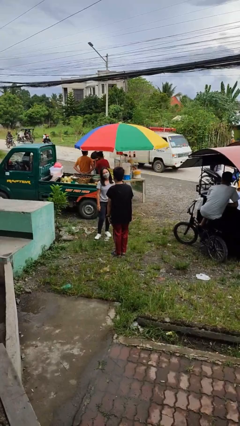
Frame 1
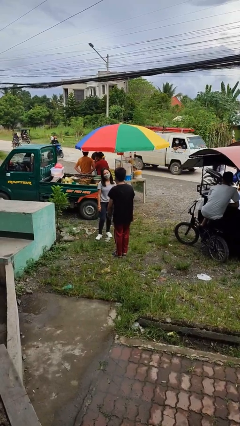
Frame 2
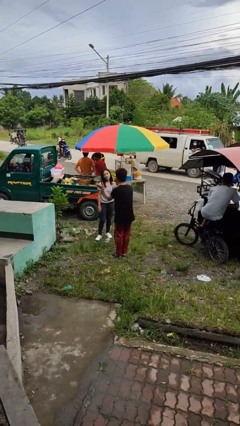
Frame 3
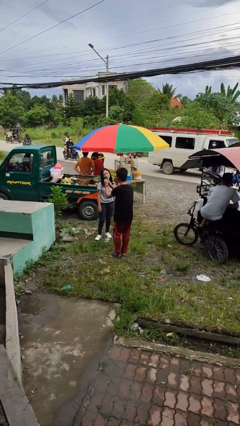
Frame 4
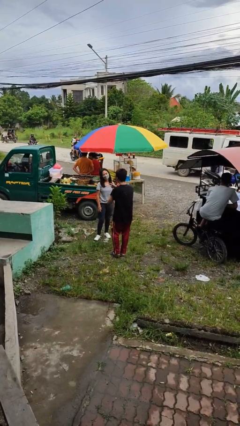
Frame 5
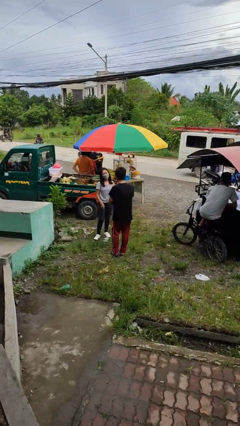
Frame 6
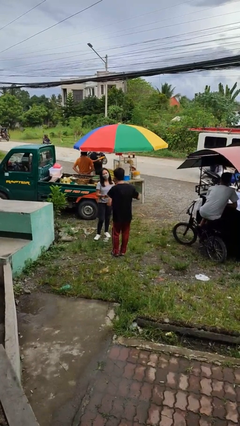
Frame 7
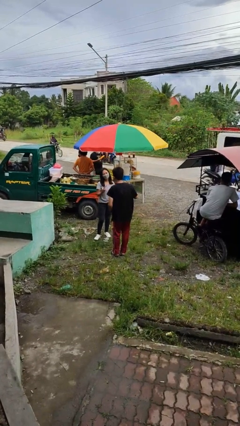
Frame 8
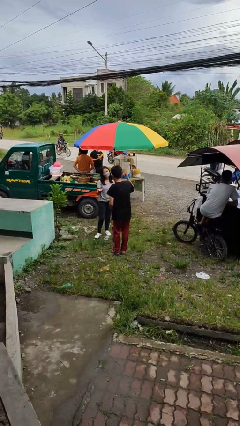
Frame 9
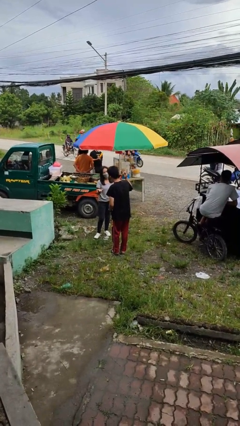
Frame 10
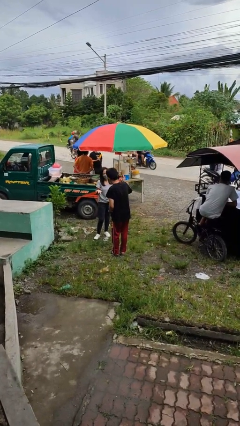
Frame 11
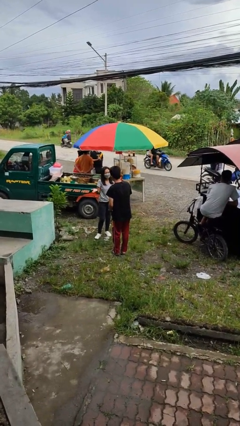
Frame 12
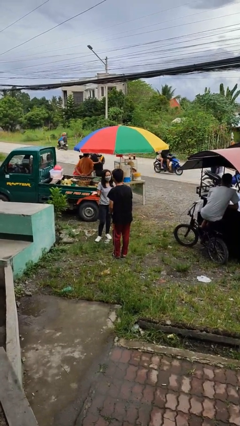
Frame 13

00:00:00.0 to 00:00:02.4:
person talks to person

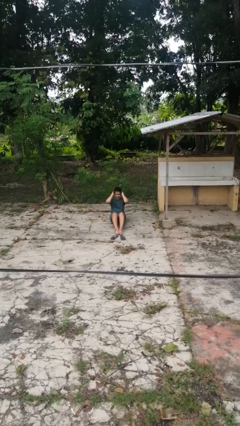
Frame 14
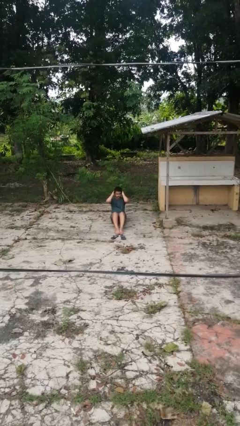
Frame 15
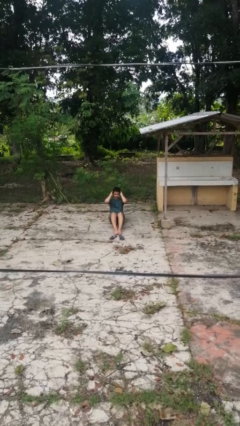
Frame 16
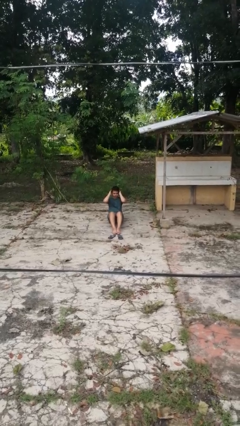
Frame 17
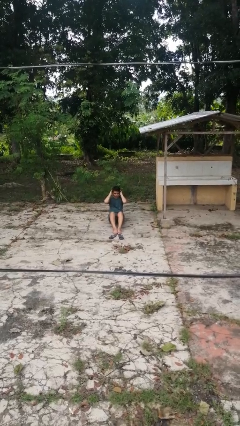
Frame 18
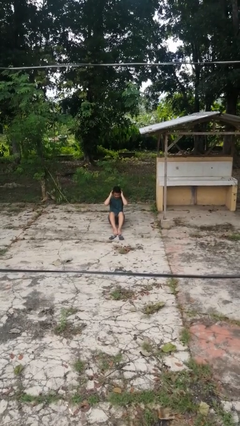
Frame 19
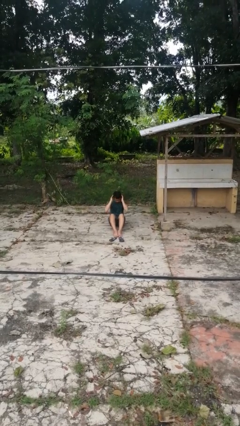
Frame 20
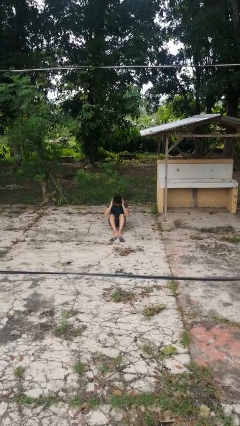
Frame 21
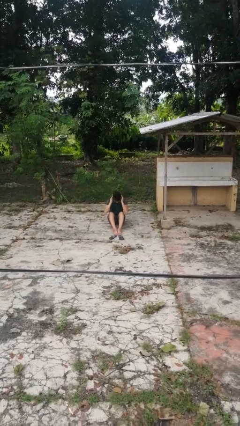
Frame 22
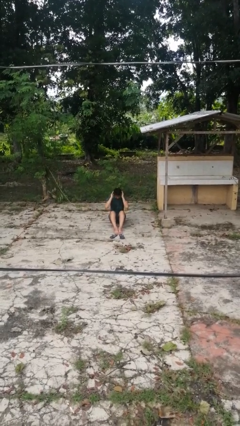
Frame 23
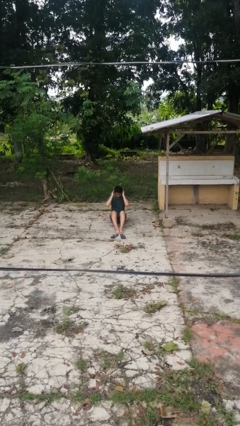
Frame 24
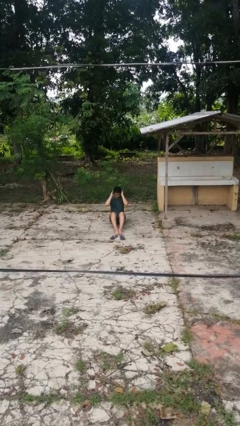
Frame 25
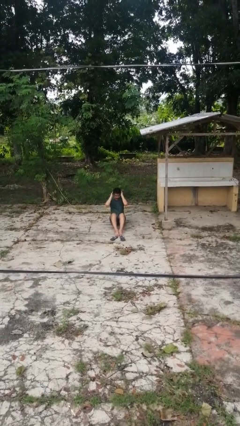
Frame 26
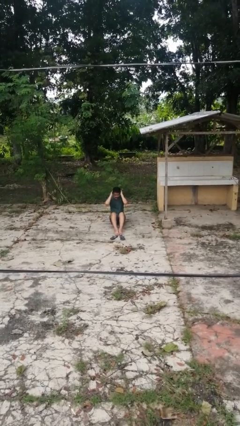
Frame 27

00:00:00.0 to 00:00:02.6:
person exercises with situp

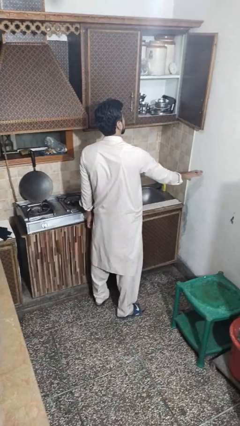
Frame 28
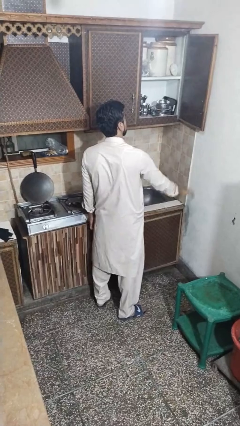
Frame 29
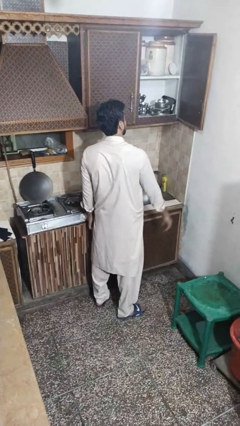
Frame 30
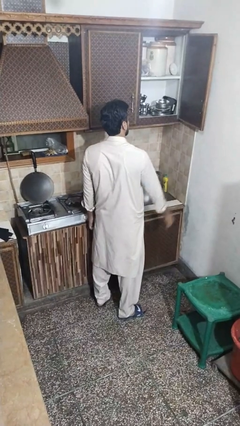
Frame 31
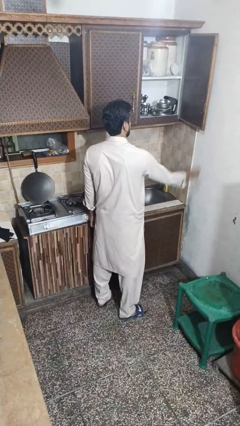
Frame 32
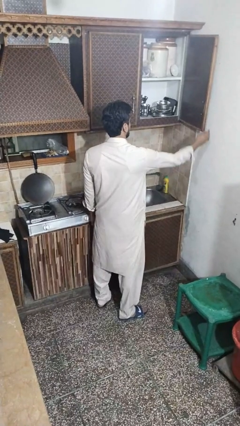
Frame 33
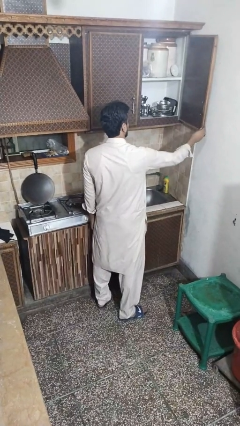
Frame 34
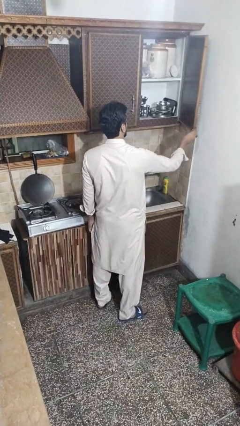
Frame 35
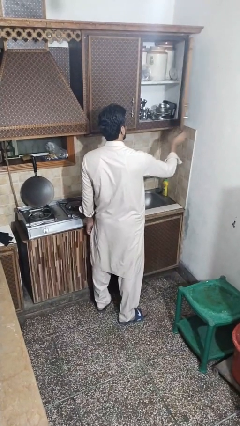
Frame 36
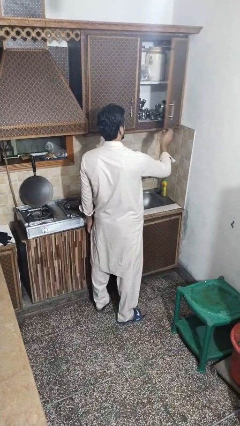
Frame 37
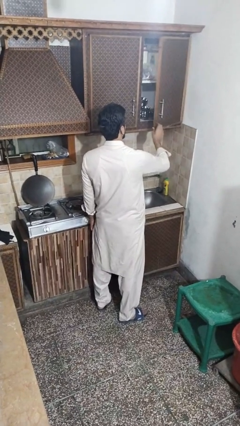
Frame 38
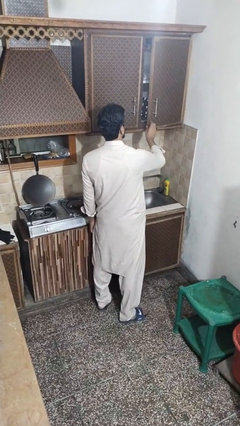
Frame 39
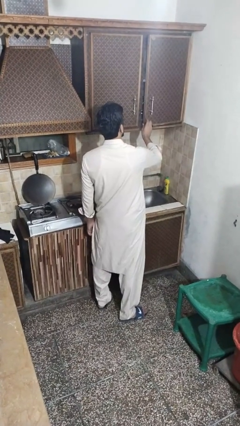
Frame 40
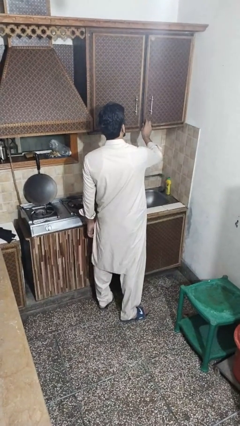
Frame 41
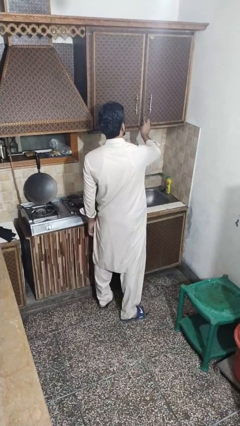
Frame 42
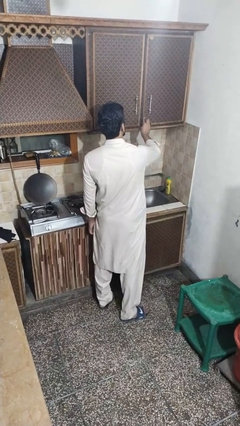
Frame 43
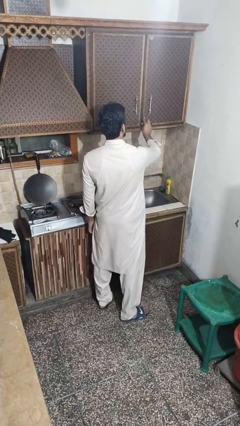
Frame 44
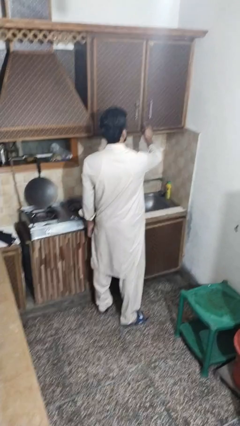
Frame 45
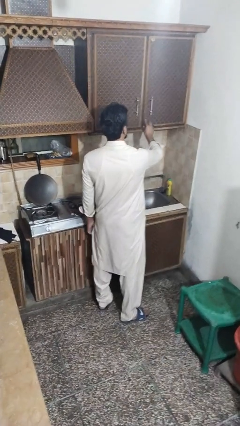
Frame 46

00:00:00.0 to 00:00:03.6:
person closes cabinet

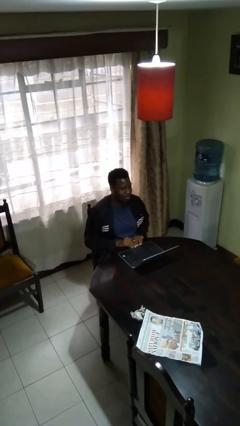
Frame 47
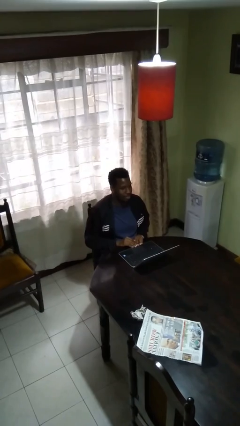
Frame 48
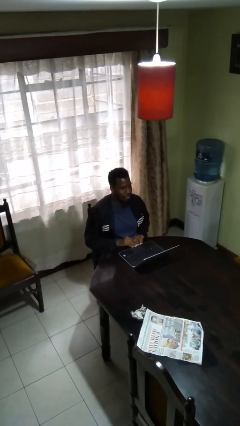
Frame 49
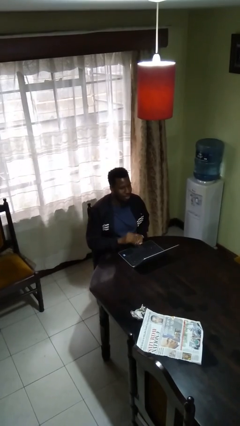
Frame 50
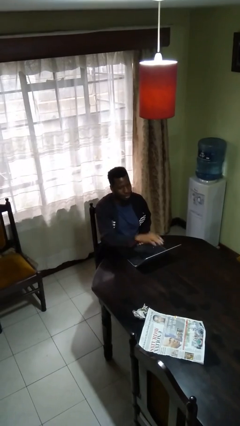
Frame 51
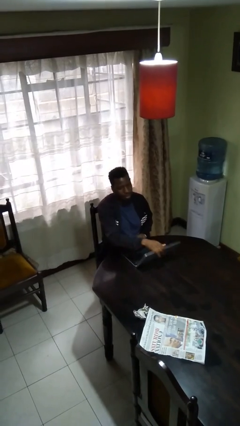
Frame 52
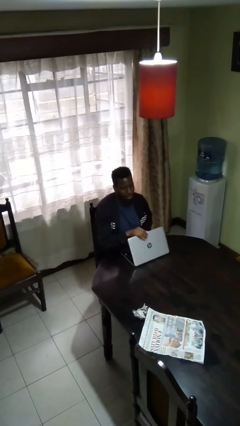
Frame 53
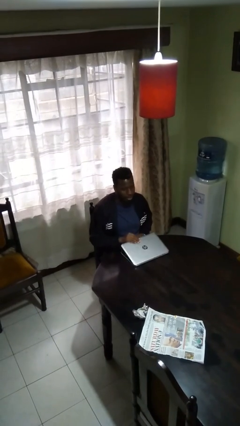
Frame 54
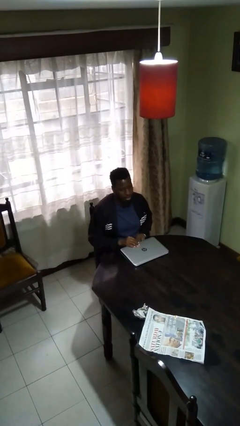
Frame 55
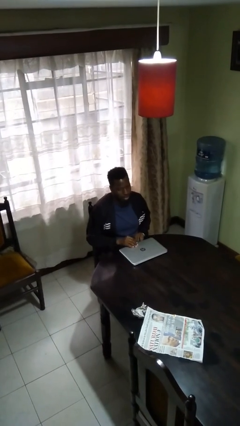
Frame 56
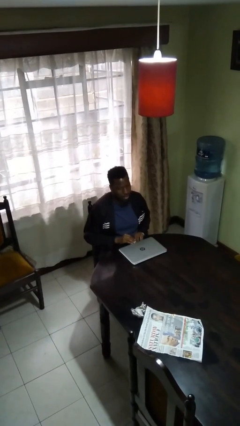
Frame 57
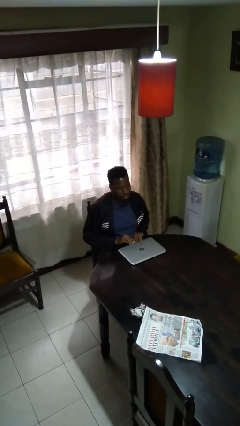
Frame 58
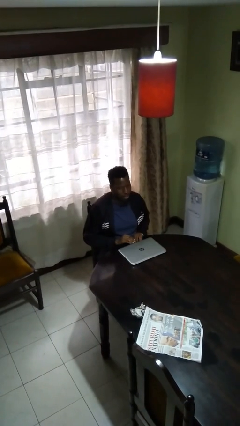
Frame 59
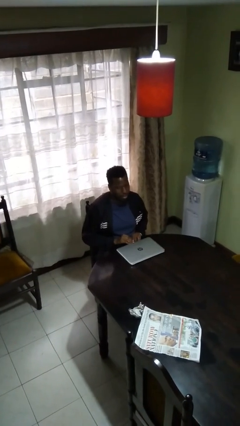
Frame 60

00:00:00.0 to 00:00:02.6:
person closes laptop

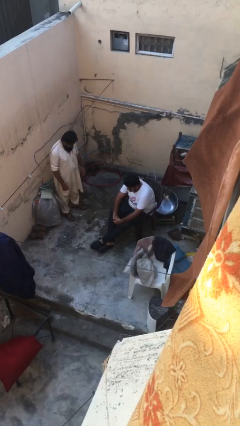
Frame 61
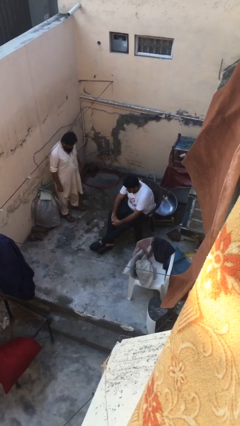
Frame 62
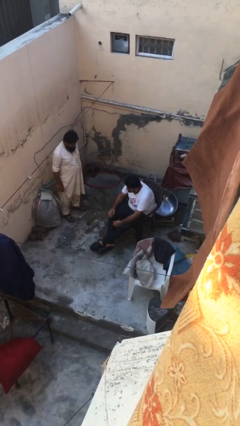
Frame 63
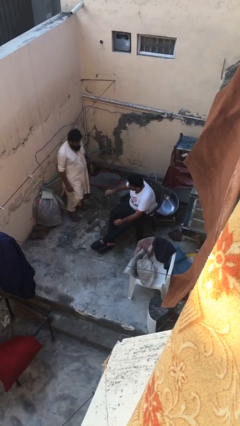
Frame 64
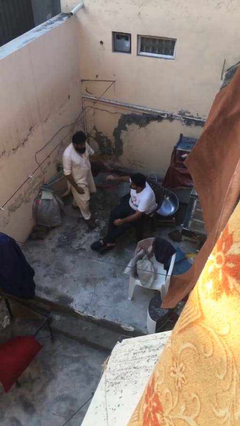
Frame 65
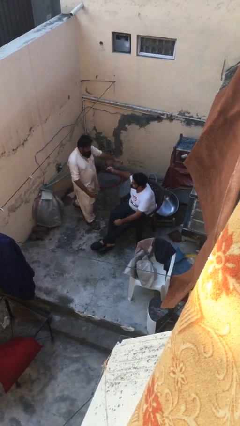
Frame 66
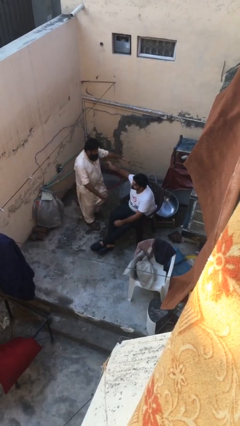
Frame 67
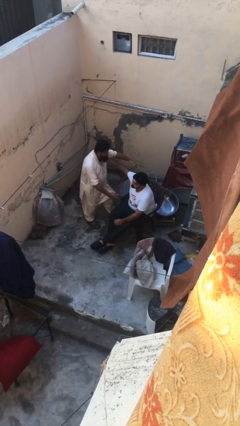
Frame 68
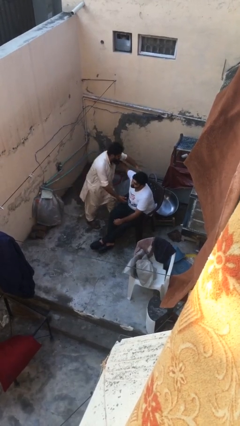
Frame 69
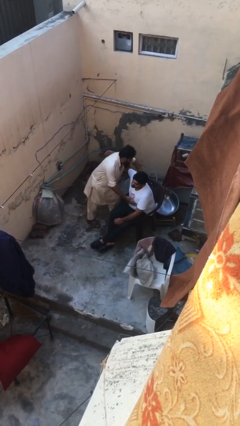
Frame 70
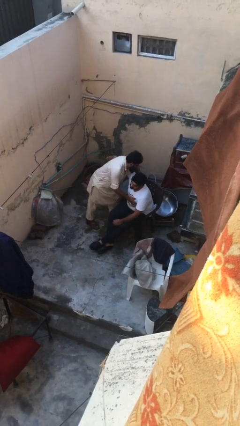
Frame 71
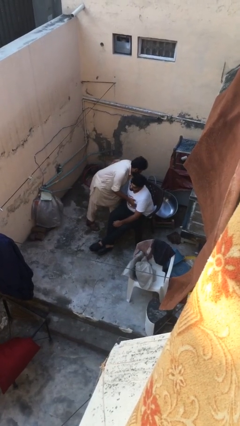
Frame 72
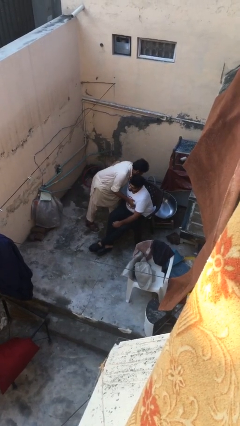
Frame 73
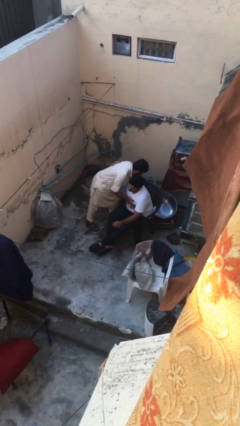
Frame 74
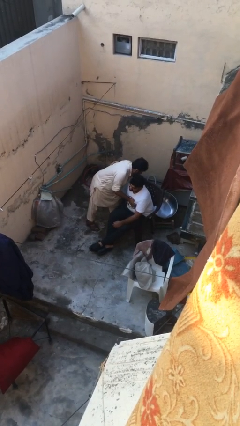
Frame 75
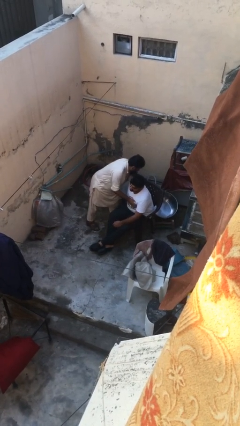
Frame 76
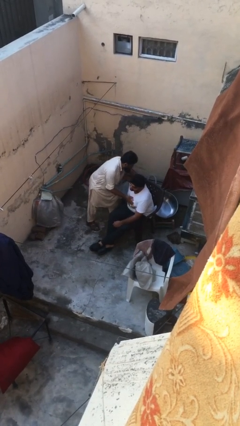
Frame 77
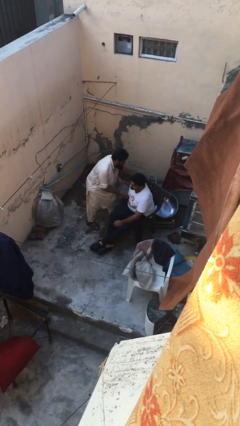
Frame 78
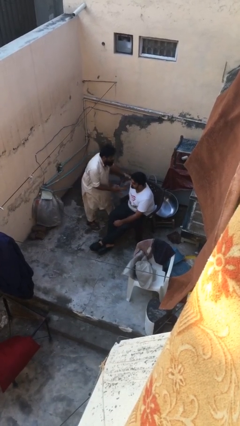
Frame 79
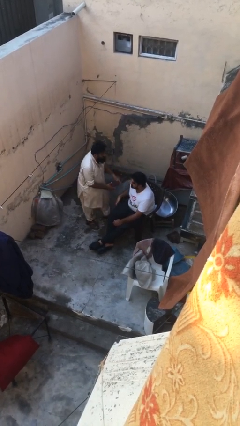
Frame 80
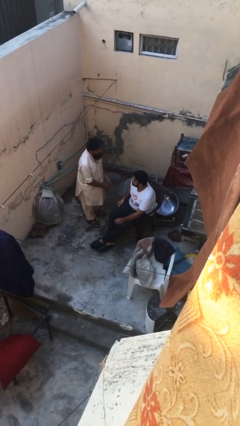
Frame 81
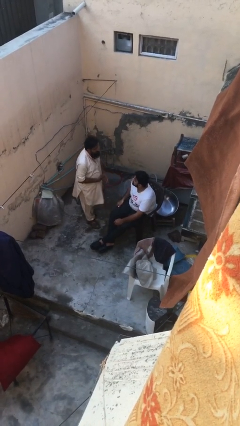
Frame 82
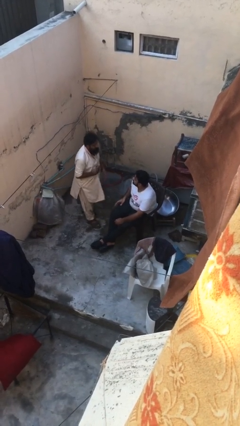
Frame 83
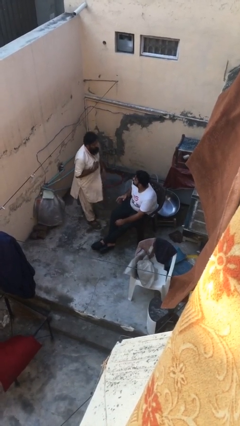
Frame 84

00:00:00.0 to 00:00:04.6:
person embraces person

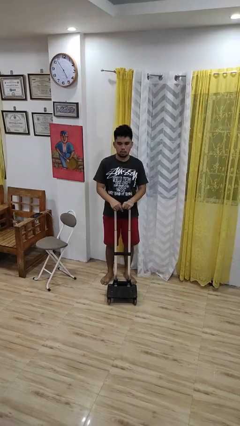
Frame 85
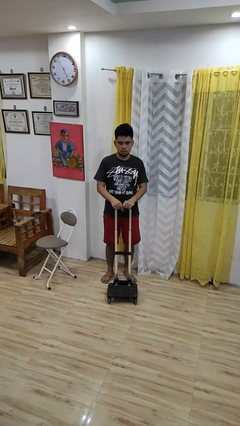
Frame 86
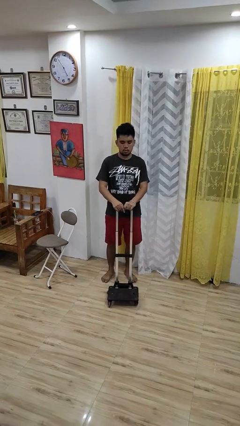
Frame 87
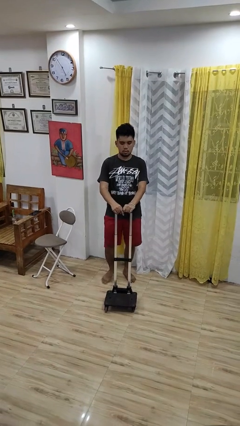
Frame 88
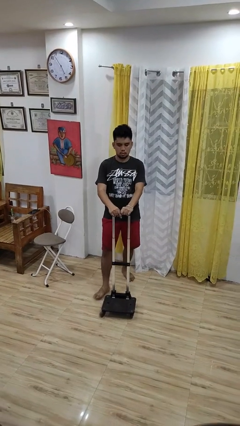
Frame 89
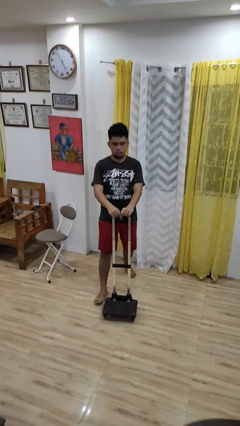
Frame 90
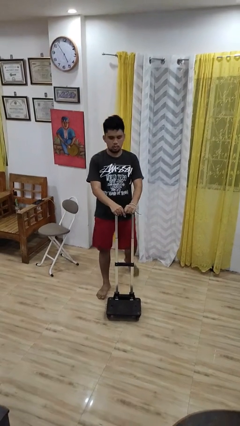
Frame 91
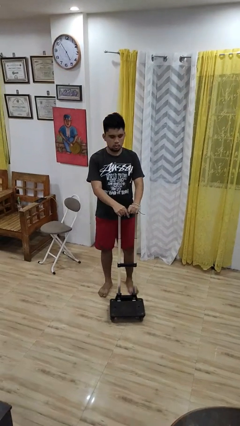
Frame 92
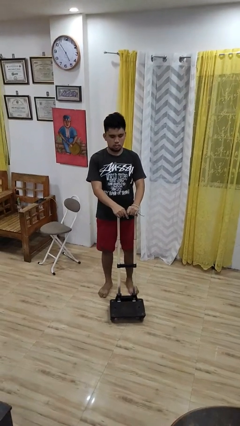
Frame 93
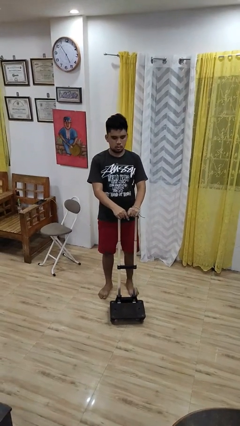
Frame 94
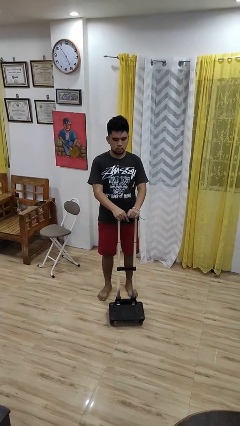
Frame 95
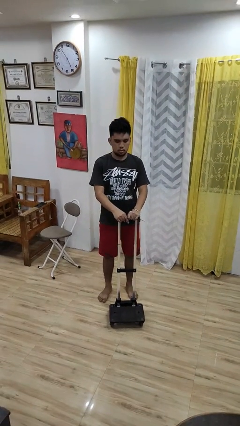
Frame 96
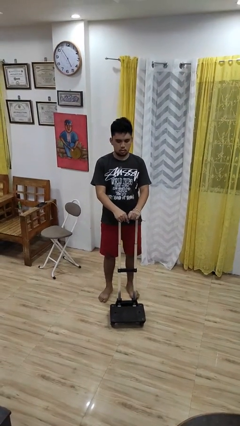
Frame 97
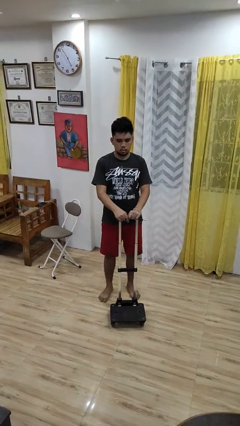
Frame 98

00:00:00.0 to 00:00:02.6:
person pushes wheeled cart
